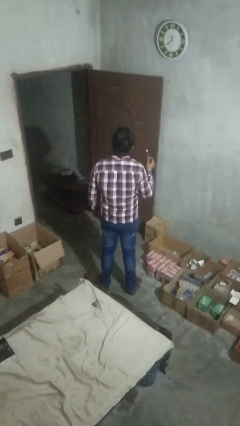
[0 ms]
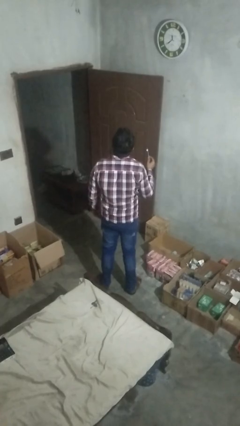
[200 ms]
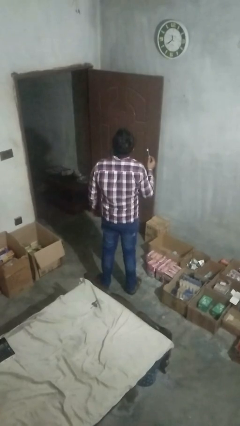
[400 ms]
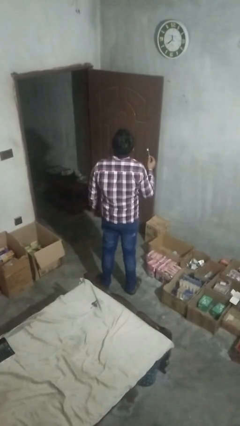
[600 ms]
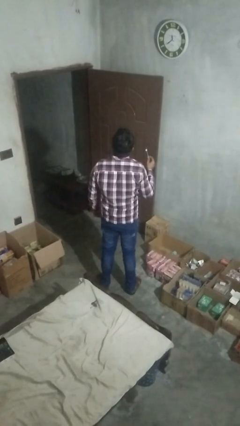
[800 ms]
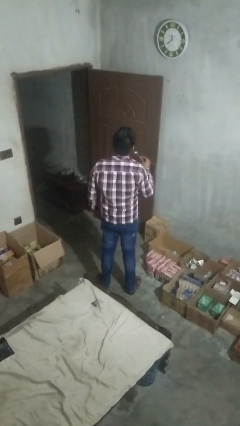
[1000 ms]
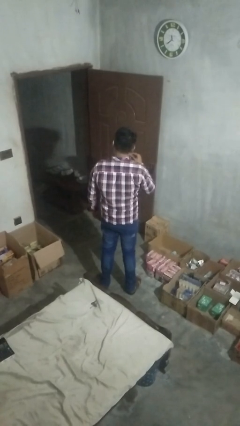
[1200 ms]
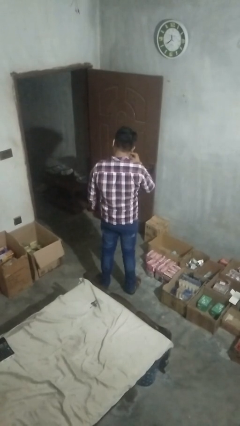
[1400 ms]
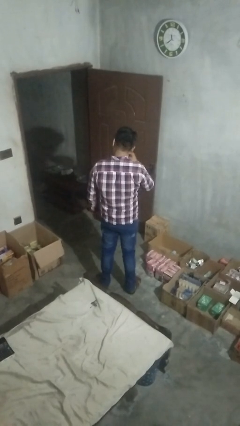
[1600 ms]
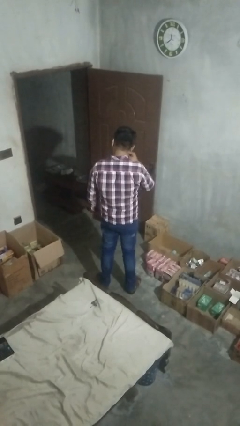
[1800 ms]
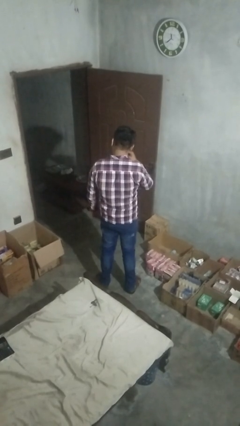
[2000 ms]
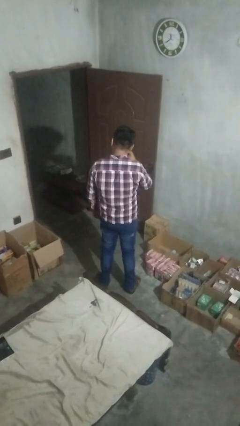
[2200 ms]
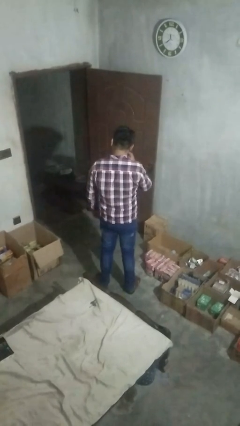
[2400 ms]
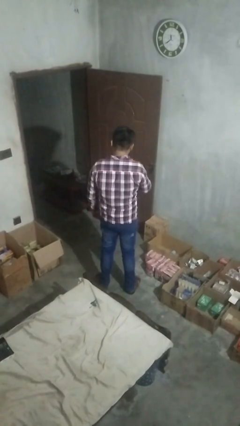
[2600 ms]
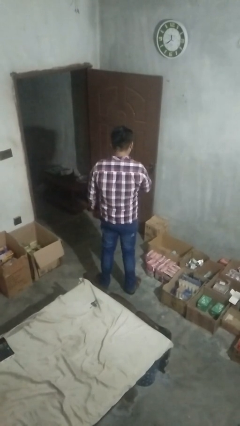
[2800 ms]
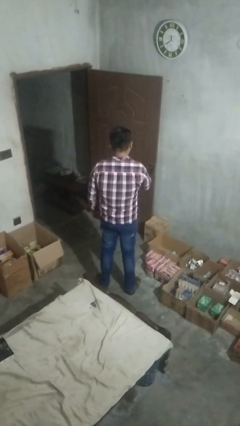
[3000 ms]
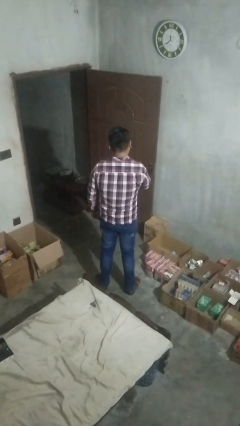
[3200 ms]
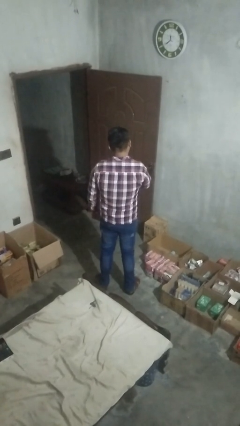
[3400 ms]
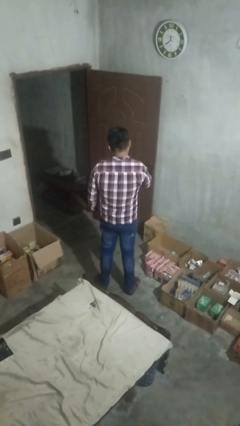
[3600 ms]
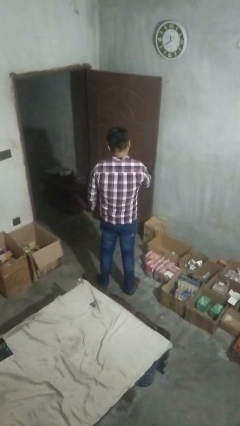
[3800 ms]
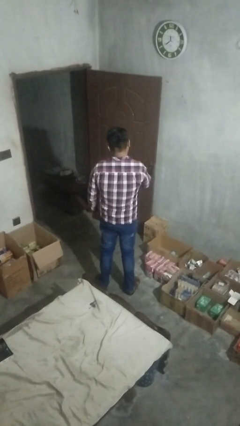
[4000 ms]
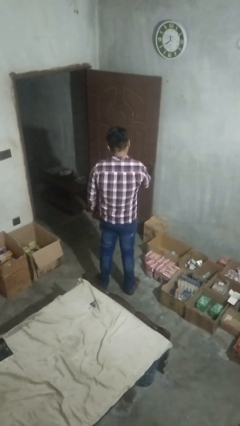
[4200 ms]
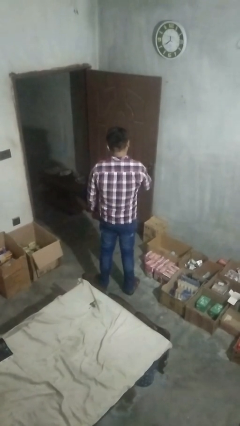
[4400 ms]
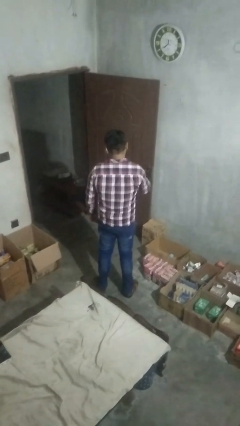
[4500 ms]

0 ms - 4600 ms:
person brushes teeth

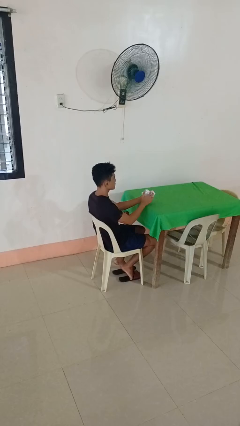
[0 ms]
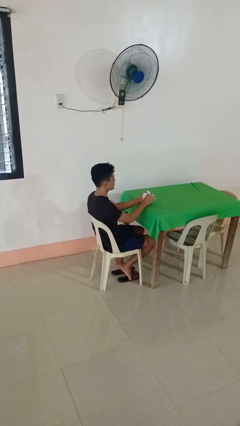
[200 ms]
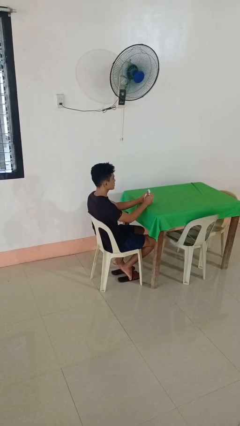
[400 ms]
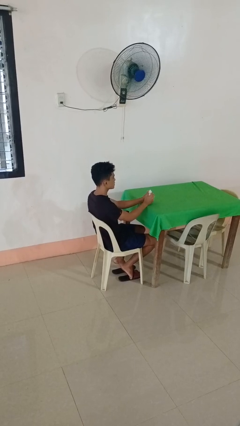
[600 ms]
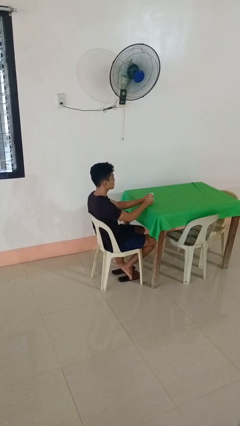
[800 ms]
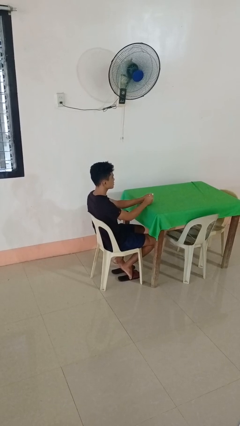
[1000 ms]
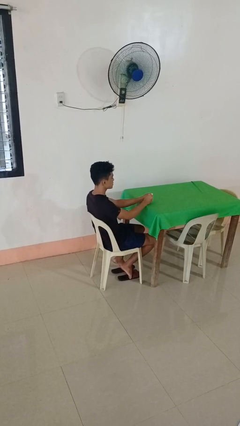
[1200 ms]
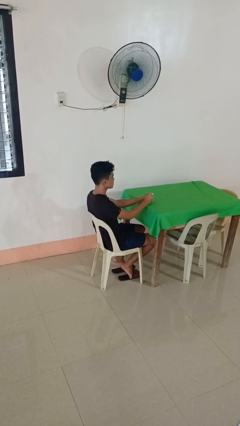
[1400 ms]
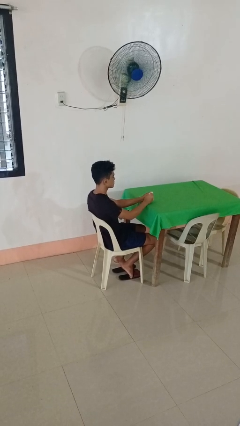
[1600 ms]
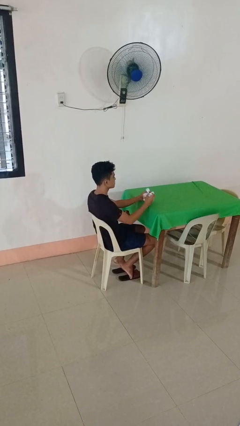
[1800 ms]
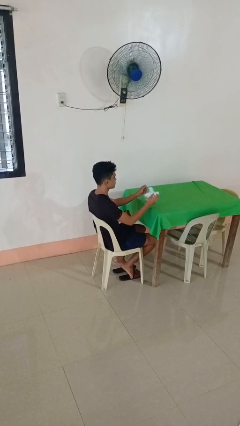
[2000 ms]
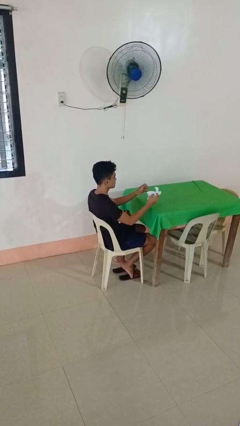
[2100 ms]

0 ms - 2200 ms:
person crumples paper

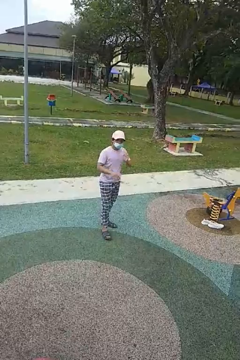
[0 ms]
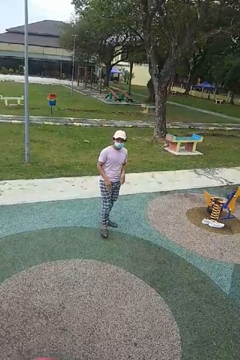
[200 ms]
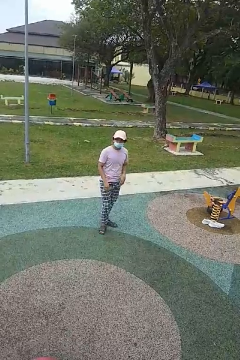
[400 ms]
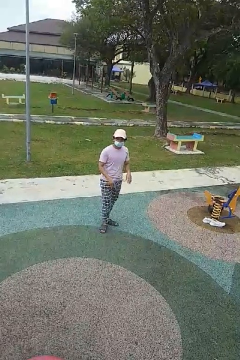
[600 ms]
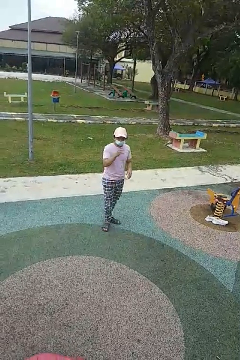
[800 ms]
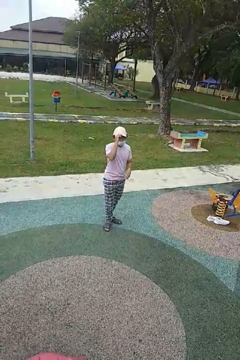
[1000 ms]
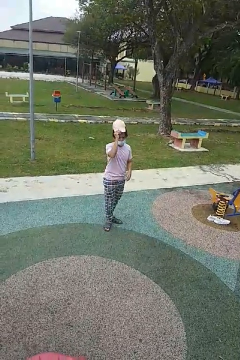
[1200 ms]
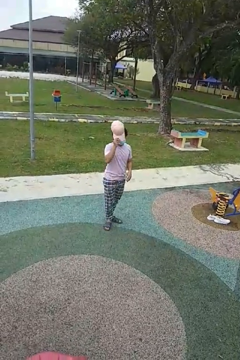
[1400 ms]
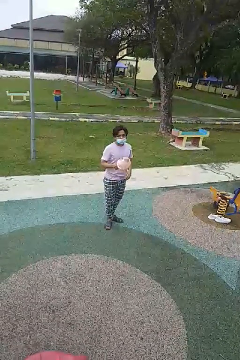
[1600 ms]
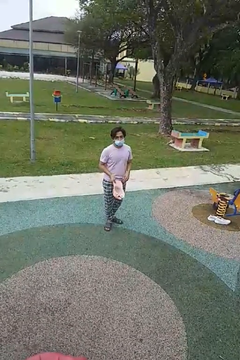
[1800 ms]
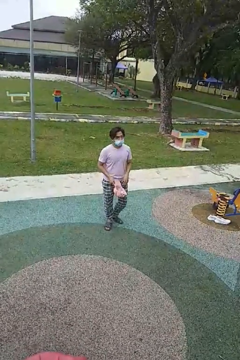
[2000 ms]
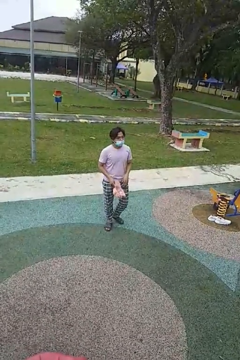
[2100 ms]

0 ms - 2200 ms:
person takes off hat

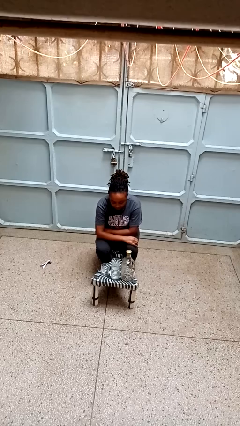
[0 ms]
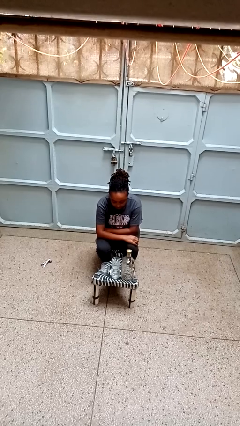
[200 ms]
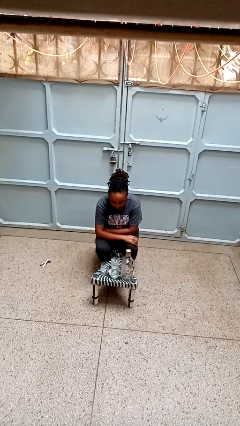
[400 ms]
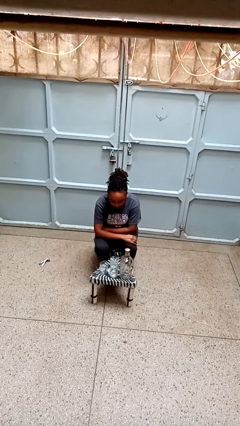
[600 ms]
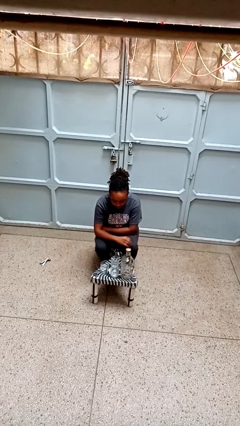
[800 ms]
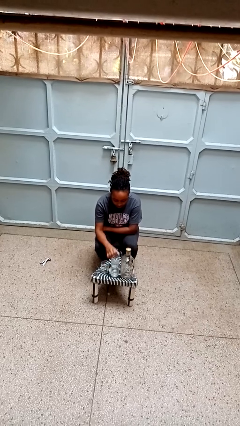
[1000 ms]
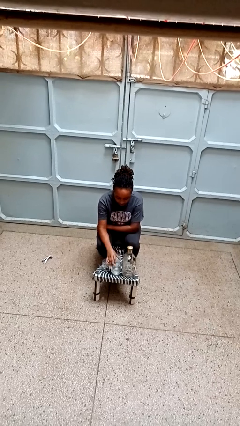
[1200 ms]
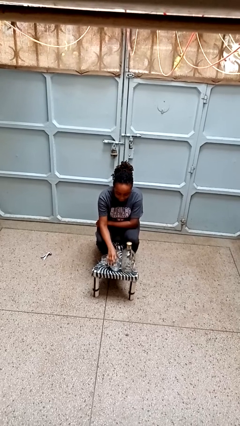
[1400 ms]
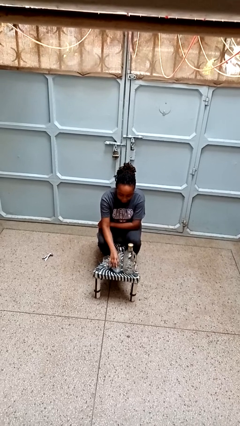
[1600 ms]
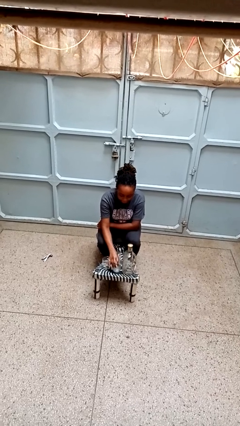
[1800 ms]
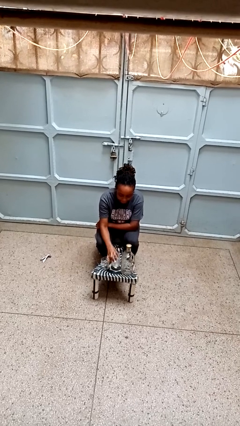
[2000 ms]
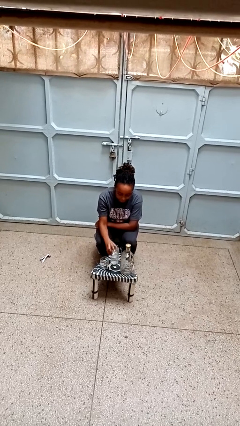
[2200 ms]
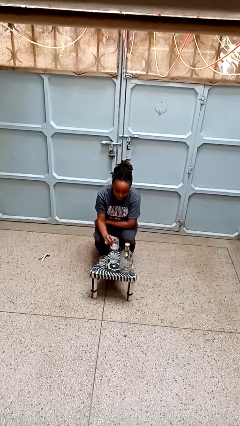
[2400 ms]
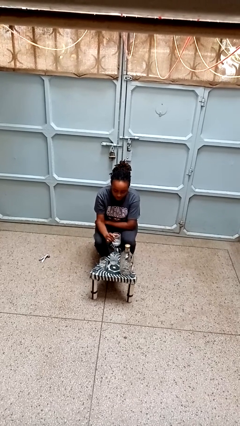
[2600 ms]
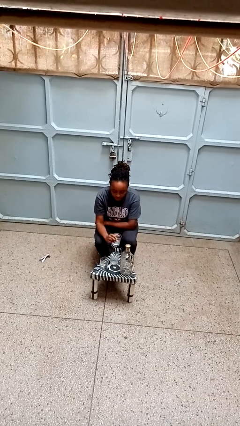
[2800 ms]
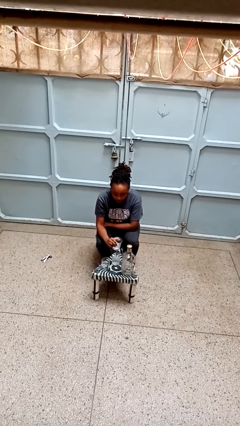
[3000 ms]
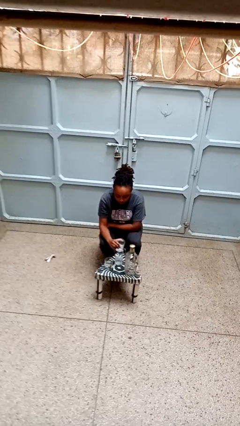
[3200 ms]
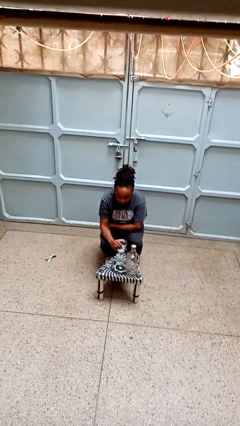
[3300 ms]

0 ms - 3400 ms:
person picks up object from table

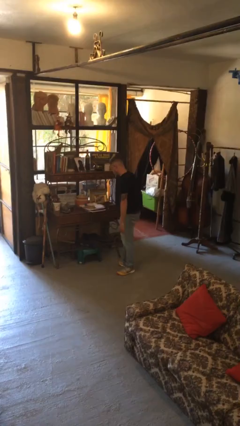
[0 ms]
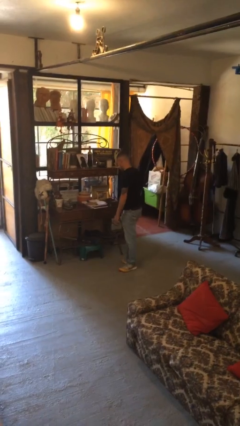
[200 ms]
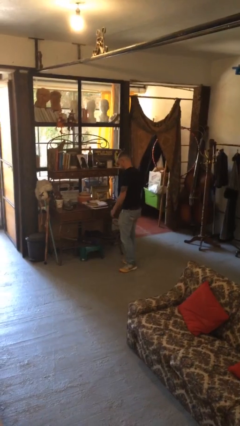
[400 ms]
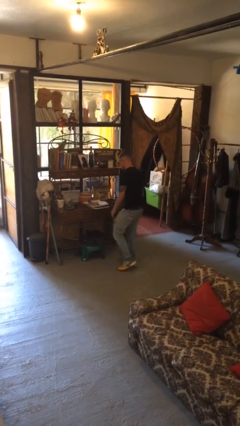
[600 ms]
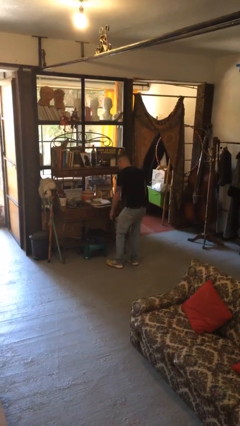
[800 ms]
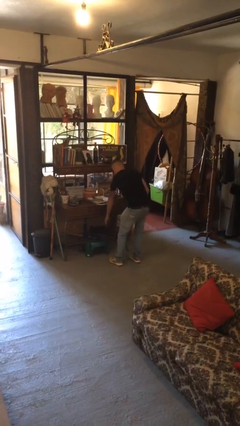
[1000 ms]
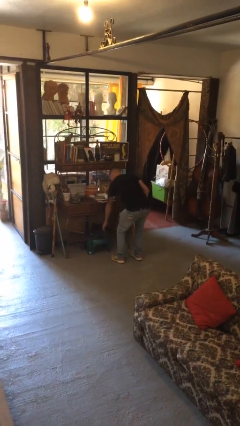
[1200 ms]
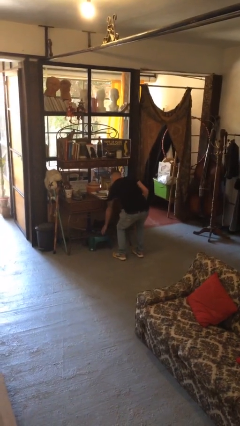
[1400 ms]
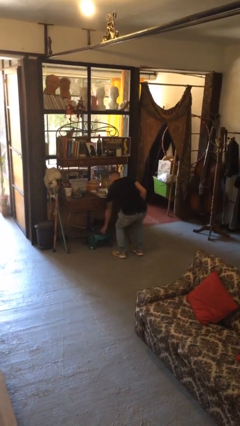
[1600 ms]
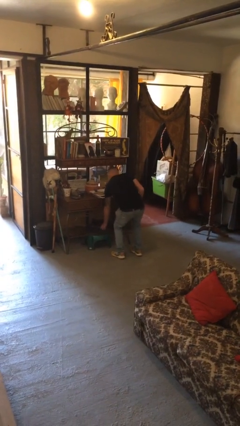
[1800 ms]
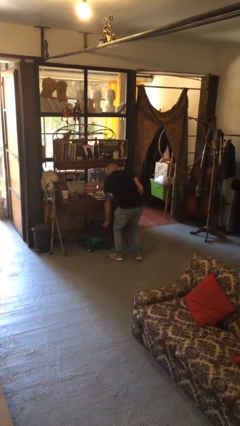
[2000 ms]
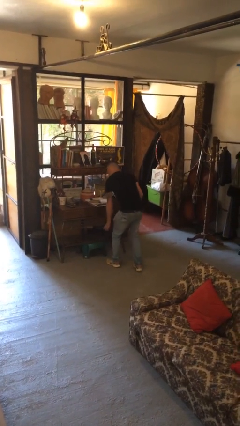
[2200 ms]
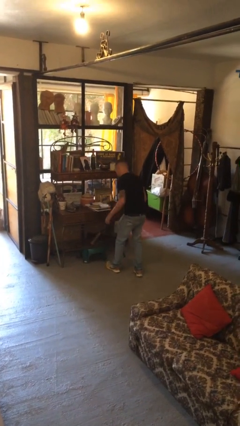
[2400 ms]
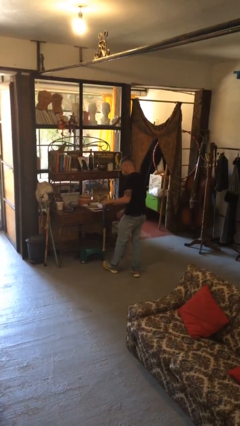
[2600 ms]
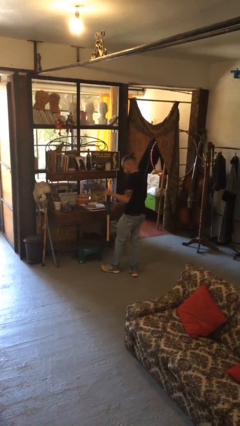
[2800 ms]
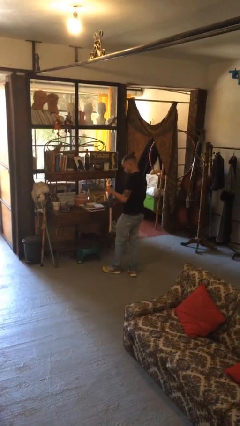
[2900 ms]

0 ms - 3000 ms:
person picks up object from cabinet

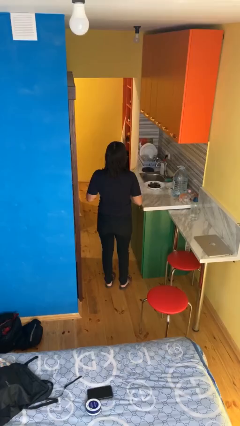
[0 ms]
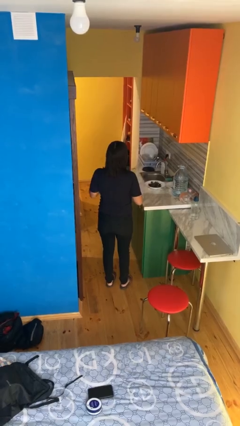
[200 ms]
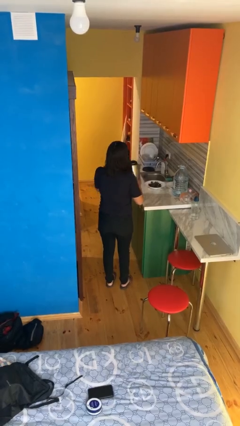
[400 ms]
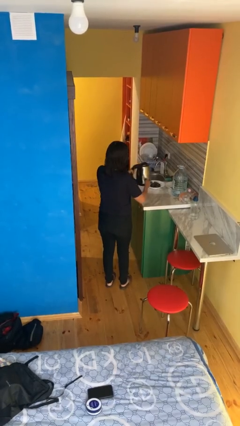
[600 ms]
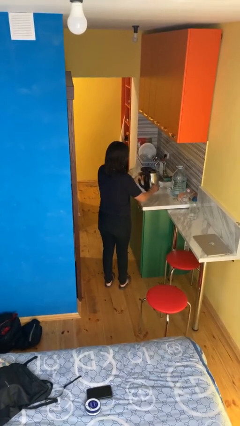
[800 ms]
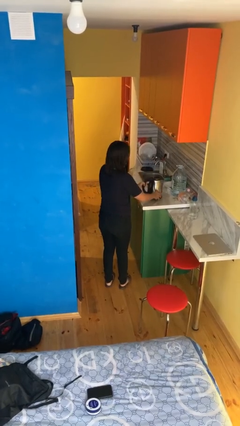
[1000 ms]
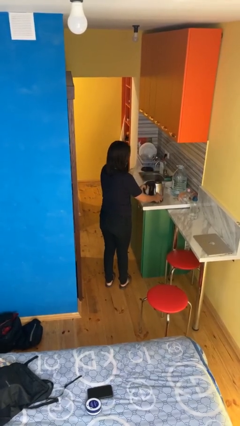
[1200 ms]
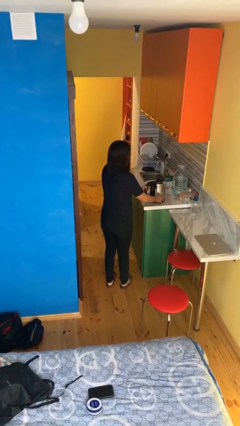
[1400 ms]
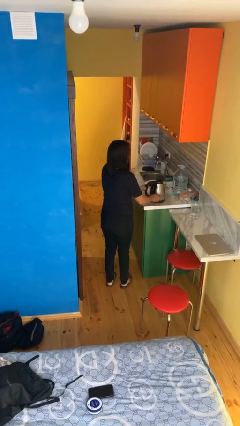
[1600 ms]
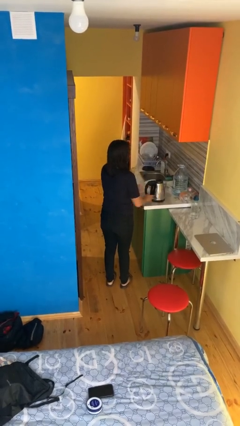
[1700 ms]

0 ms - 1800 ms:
person puts down object on countertop

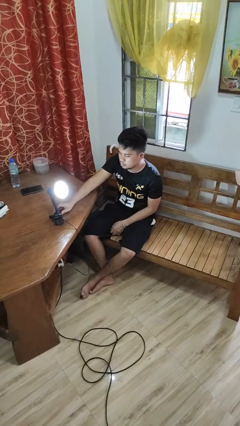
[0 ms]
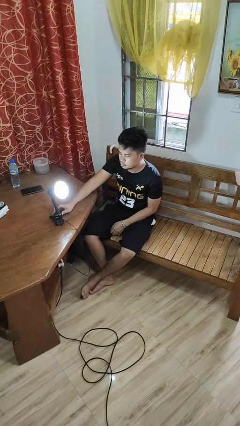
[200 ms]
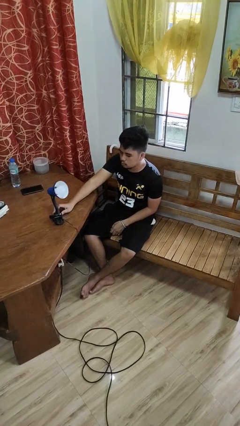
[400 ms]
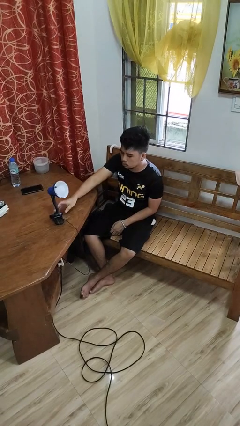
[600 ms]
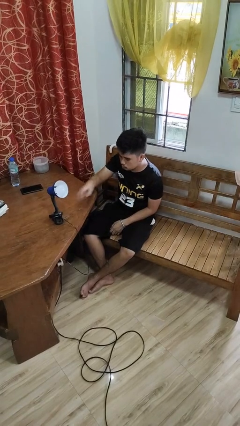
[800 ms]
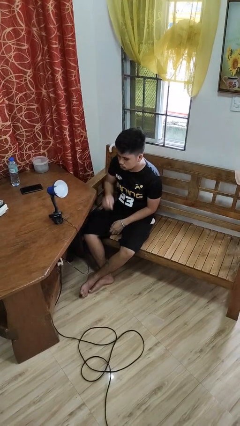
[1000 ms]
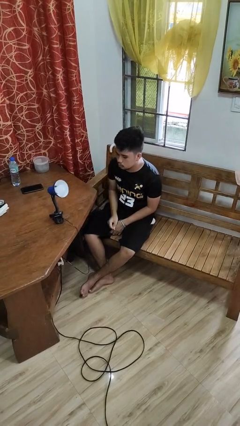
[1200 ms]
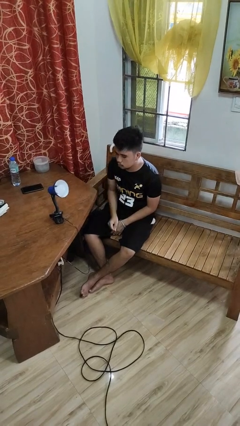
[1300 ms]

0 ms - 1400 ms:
person turns off lamp
